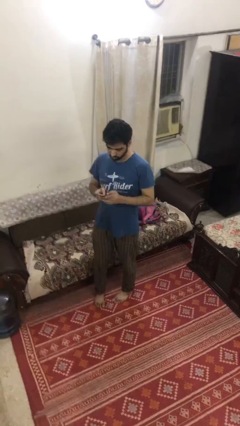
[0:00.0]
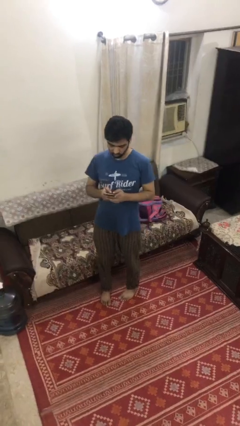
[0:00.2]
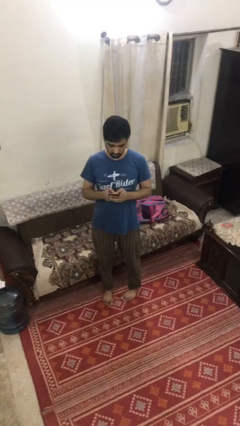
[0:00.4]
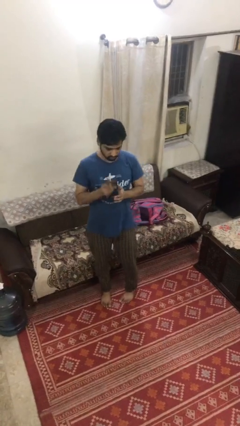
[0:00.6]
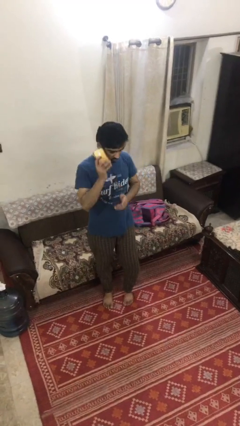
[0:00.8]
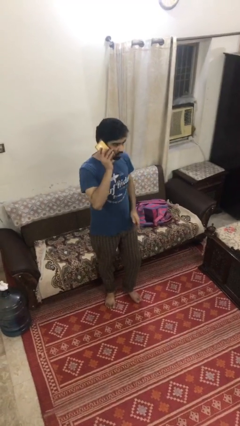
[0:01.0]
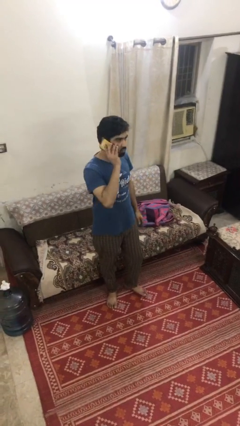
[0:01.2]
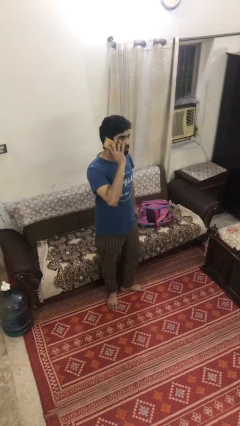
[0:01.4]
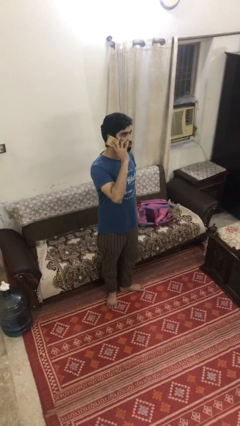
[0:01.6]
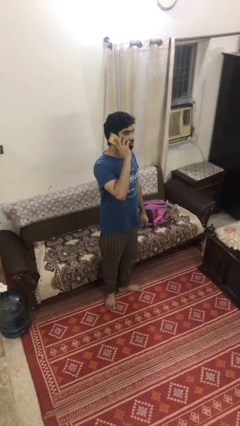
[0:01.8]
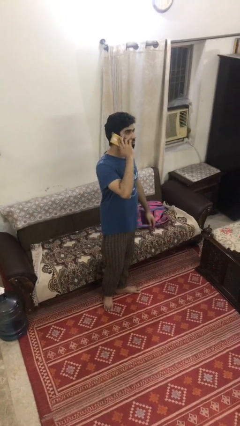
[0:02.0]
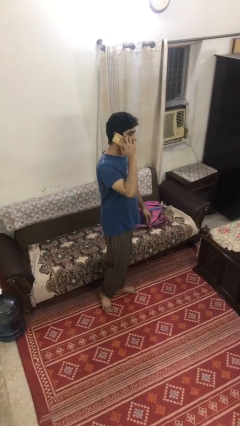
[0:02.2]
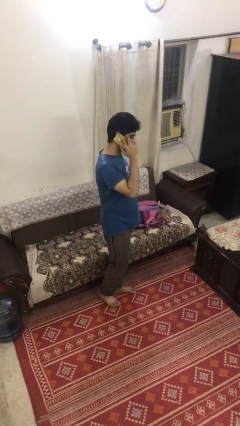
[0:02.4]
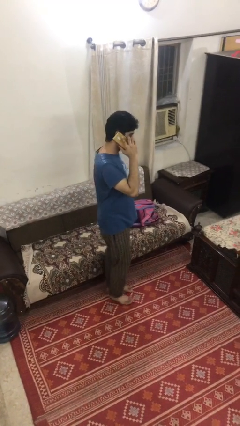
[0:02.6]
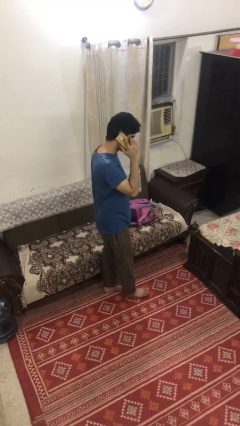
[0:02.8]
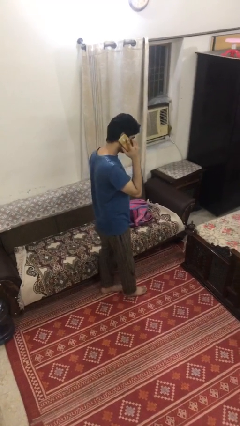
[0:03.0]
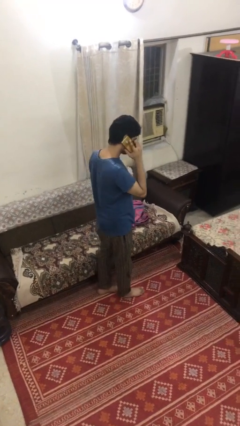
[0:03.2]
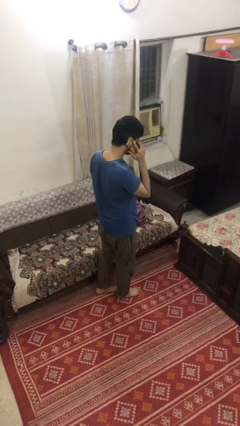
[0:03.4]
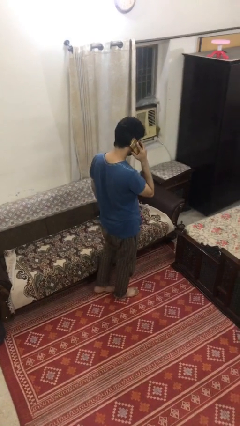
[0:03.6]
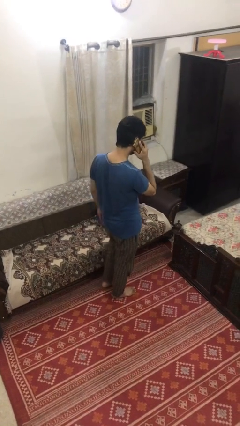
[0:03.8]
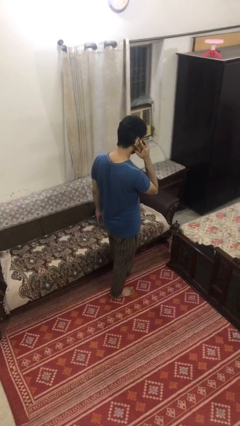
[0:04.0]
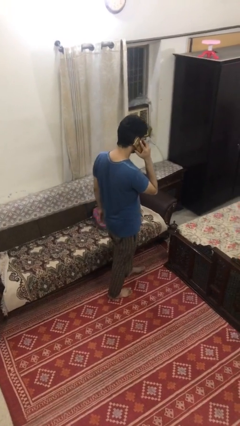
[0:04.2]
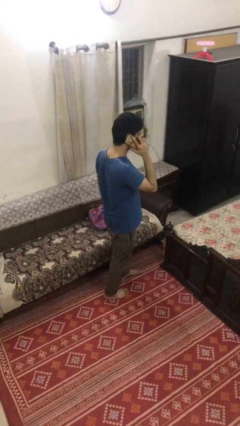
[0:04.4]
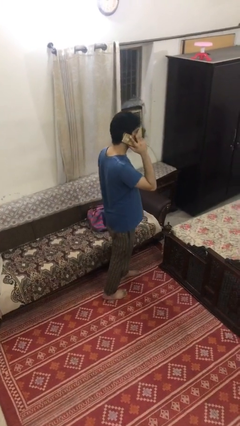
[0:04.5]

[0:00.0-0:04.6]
person talks on phone

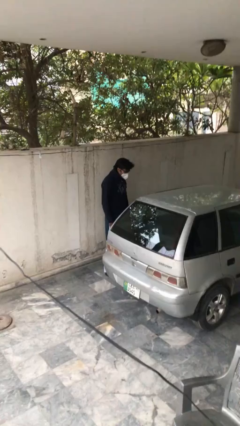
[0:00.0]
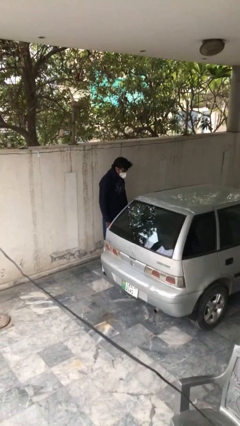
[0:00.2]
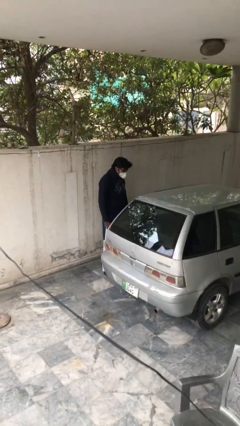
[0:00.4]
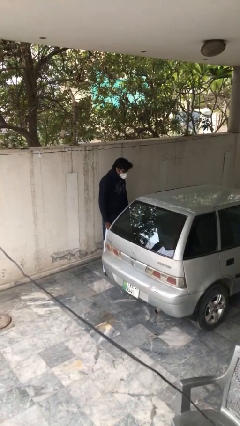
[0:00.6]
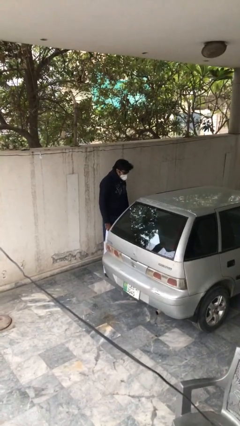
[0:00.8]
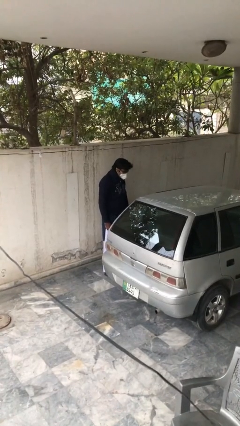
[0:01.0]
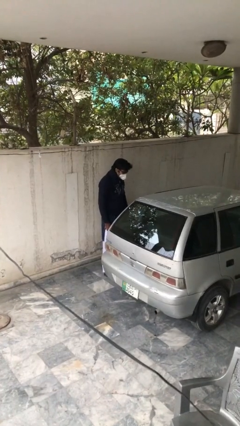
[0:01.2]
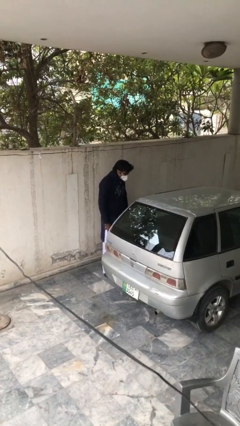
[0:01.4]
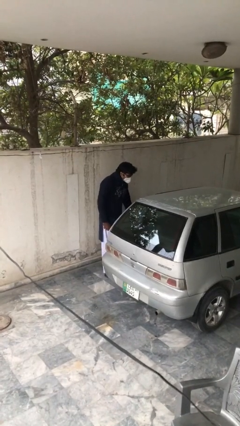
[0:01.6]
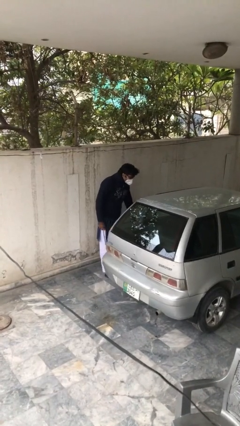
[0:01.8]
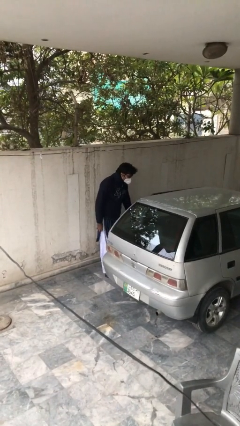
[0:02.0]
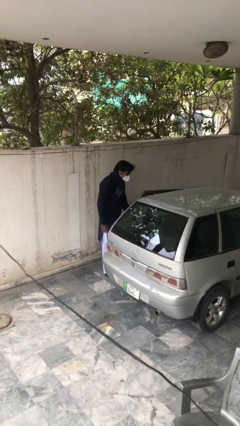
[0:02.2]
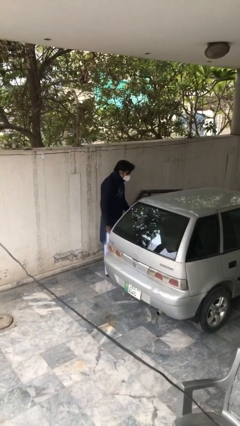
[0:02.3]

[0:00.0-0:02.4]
person opens car door

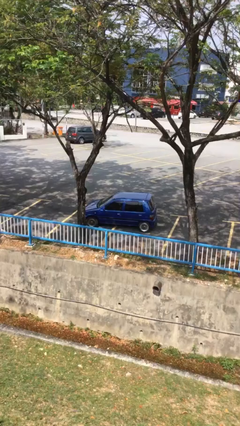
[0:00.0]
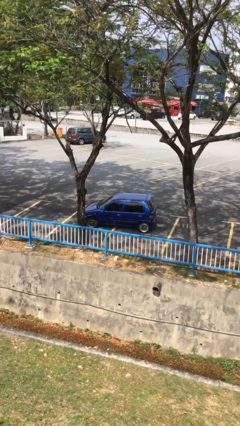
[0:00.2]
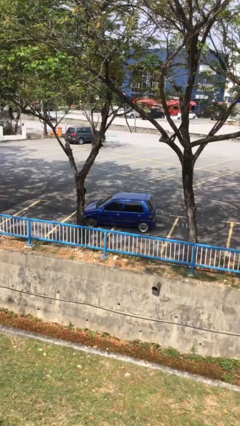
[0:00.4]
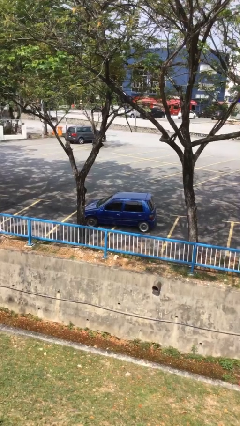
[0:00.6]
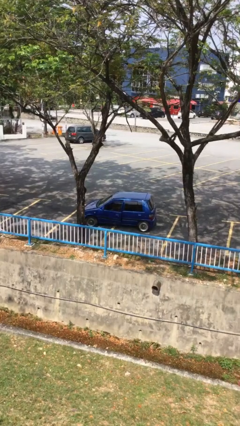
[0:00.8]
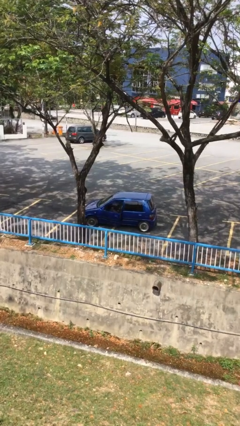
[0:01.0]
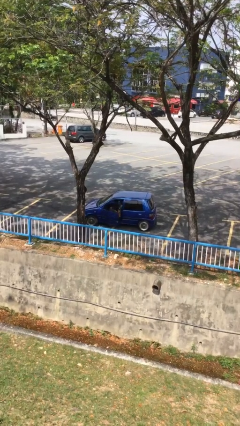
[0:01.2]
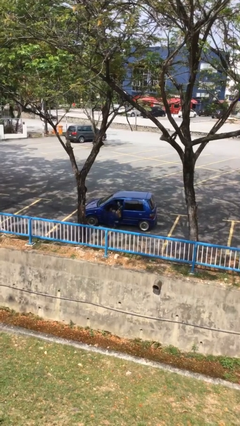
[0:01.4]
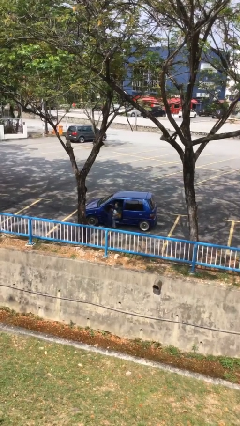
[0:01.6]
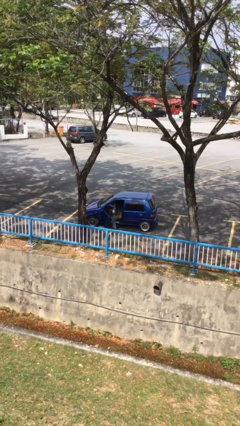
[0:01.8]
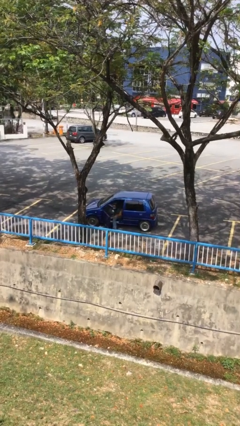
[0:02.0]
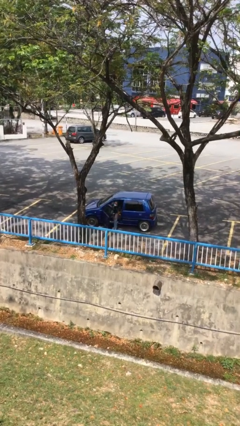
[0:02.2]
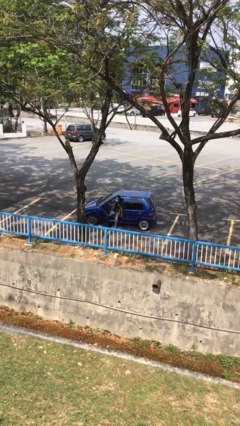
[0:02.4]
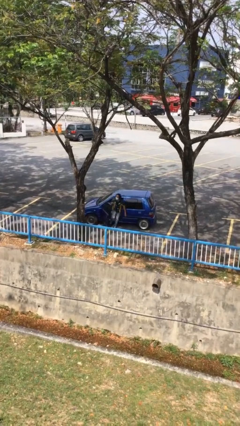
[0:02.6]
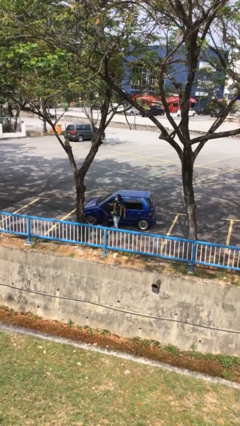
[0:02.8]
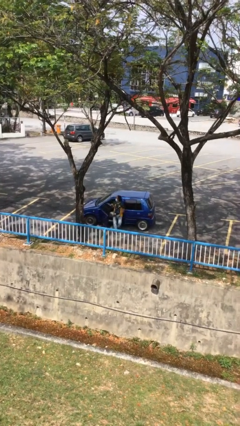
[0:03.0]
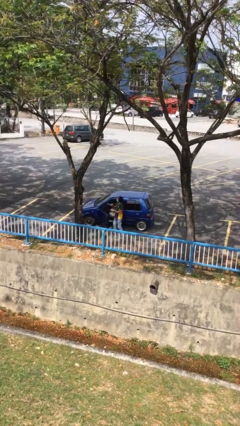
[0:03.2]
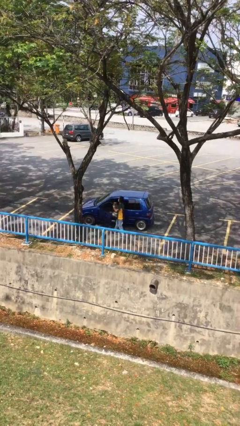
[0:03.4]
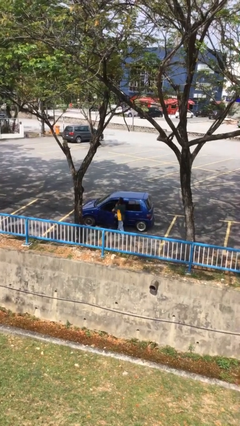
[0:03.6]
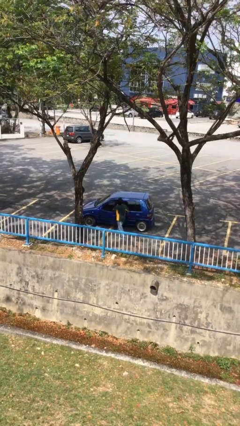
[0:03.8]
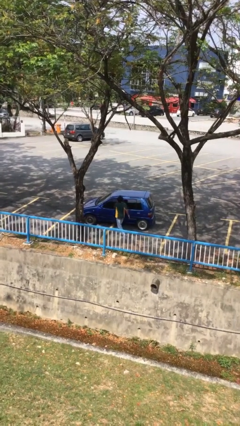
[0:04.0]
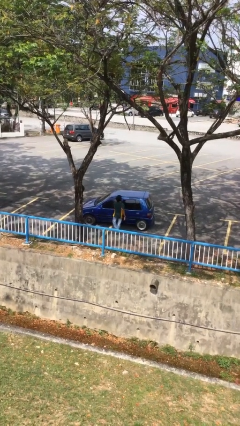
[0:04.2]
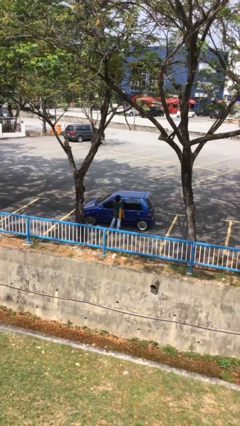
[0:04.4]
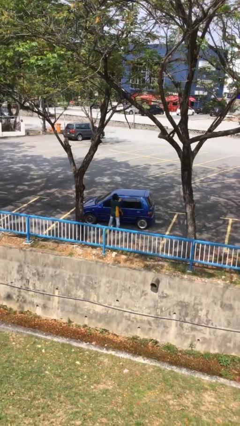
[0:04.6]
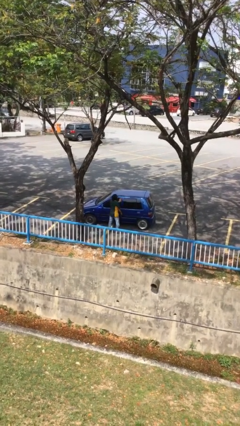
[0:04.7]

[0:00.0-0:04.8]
car drops off person

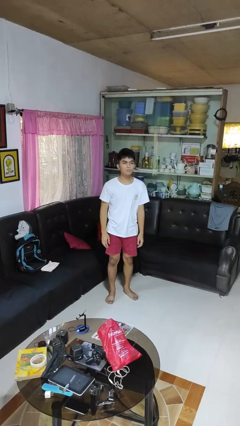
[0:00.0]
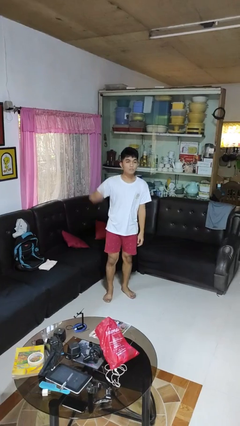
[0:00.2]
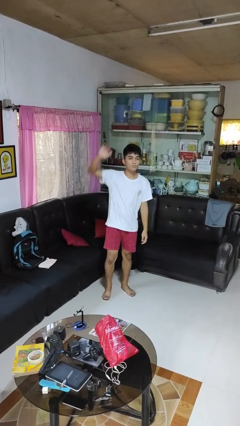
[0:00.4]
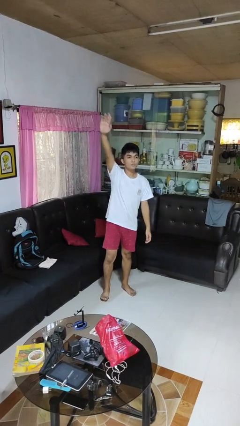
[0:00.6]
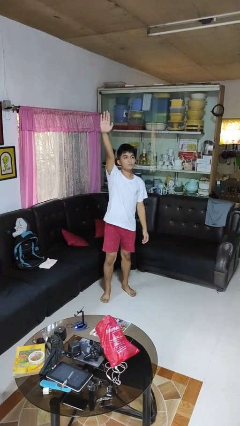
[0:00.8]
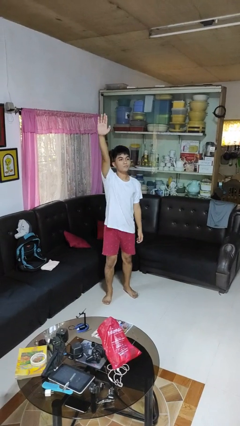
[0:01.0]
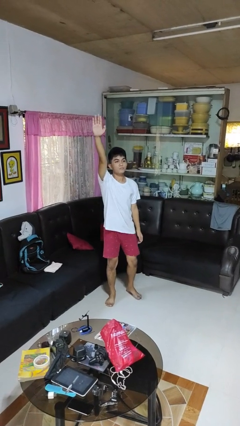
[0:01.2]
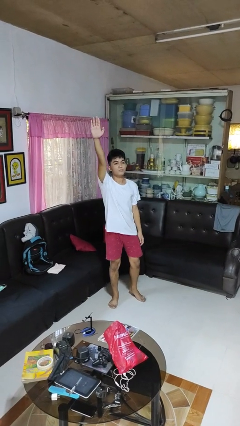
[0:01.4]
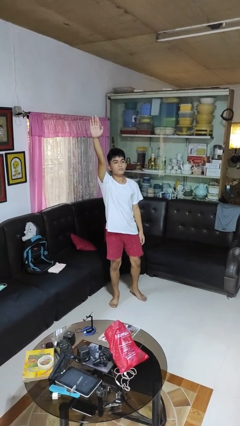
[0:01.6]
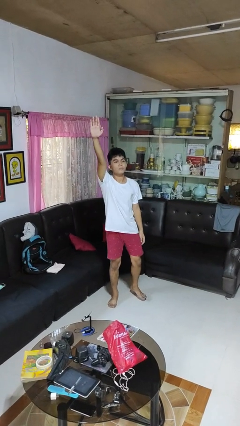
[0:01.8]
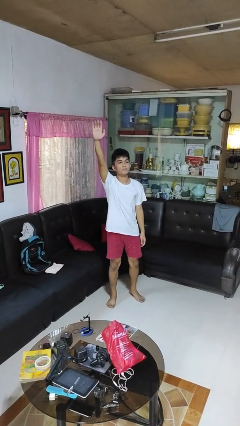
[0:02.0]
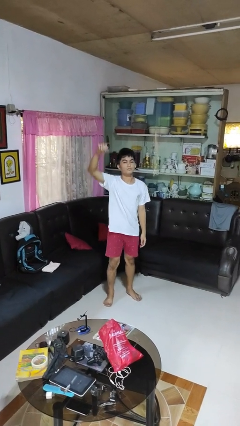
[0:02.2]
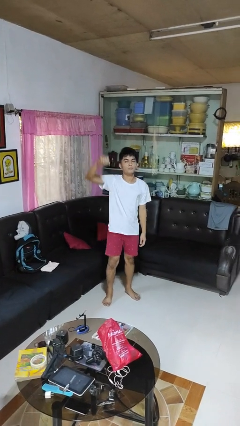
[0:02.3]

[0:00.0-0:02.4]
person gestures raise hand

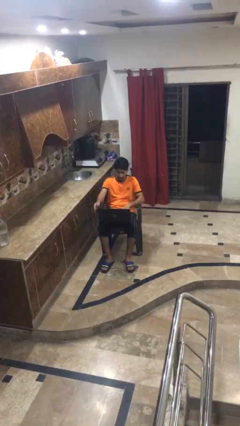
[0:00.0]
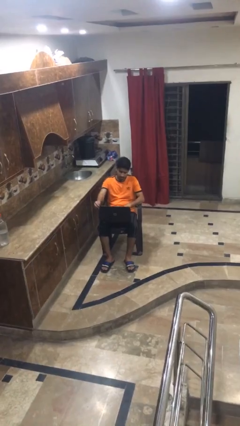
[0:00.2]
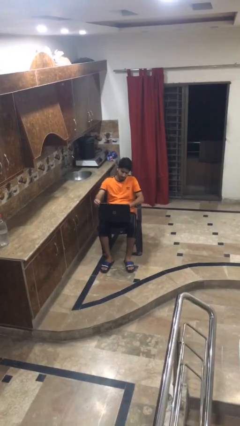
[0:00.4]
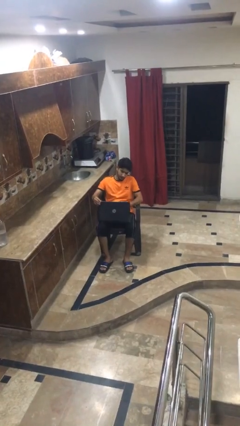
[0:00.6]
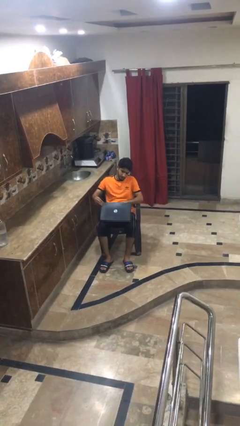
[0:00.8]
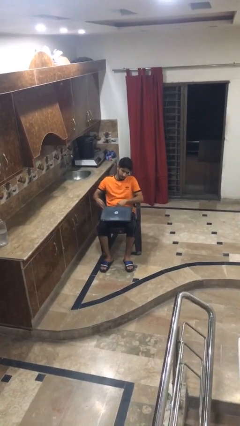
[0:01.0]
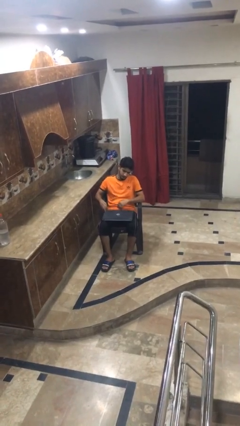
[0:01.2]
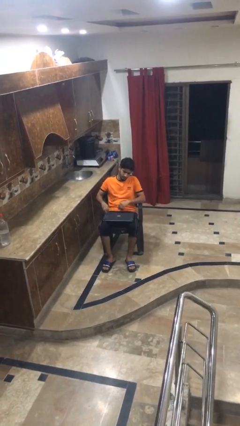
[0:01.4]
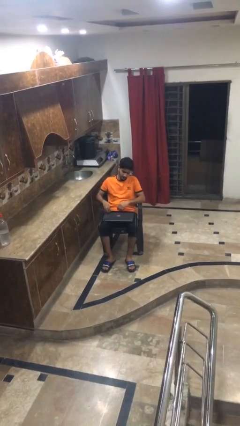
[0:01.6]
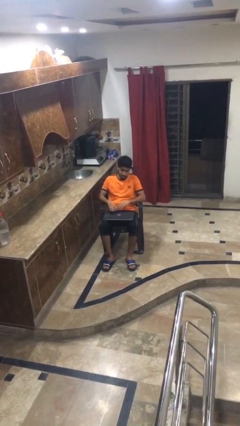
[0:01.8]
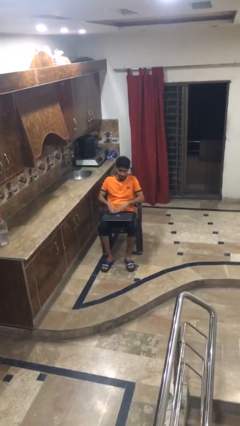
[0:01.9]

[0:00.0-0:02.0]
person closes laptop

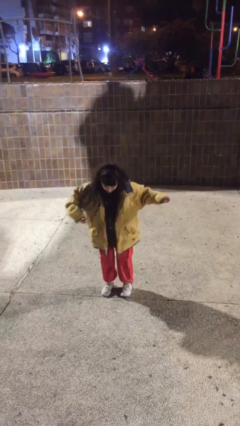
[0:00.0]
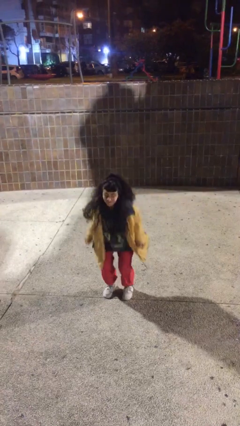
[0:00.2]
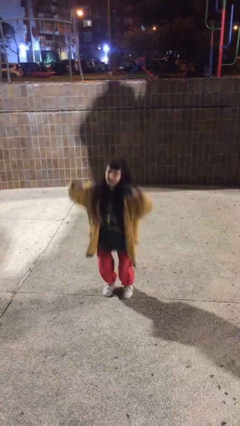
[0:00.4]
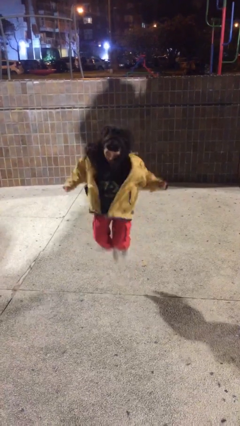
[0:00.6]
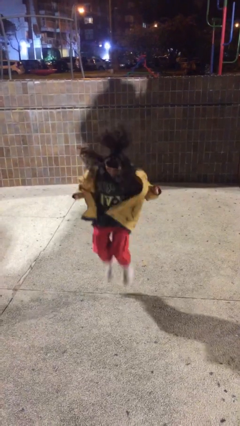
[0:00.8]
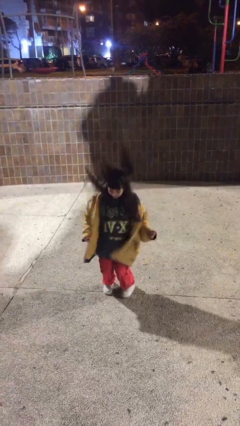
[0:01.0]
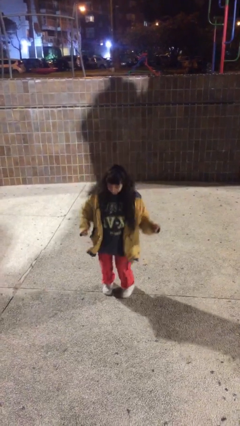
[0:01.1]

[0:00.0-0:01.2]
person jumps

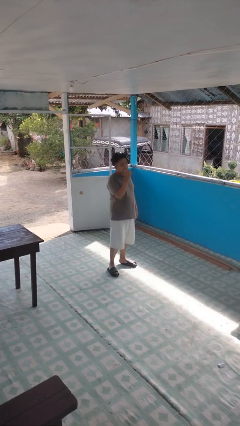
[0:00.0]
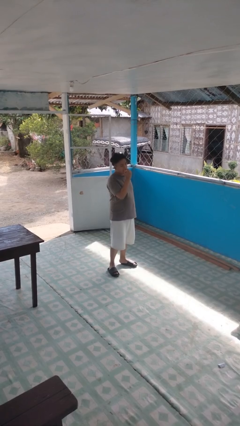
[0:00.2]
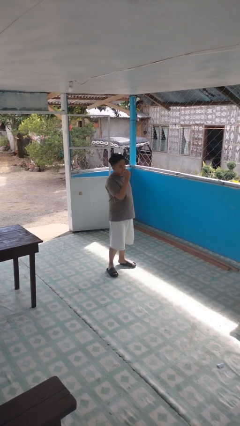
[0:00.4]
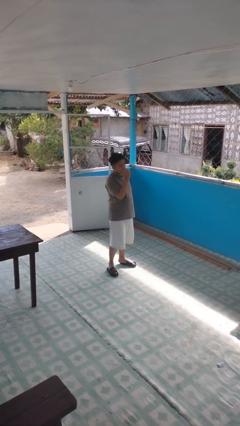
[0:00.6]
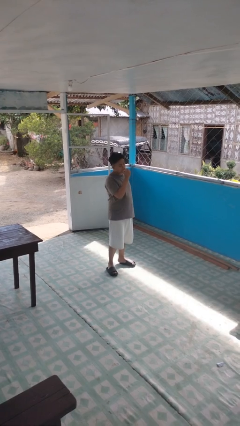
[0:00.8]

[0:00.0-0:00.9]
person eats apple
